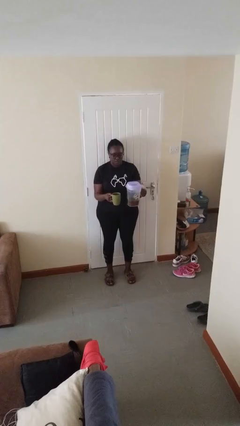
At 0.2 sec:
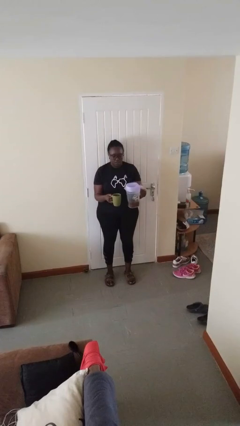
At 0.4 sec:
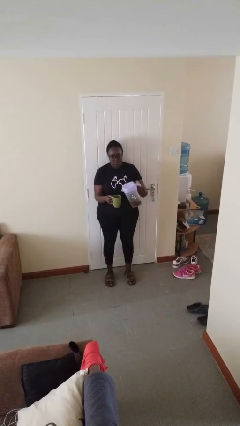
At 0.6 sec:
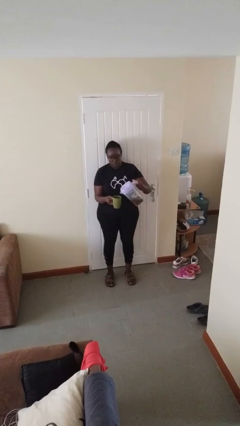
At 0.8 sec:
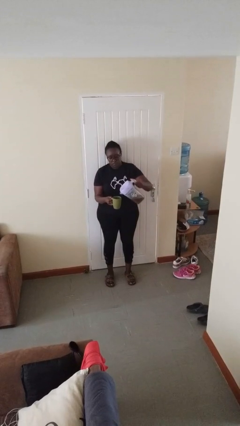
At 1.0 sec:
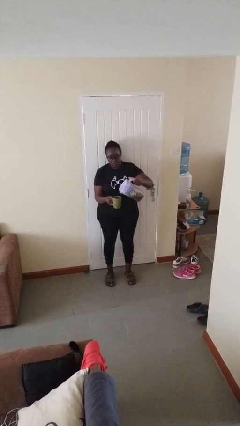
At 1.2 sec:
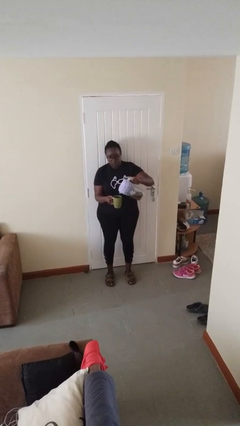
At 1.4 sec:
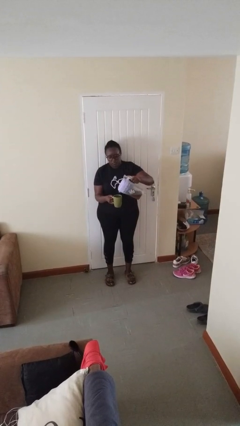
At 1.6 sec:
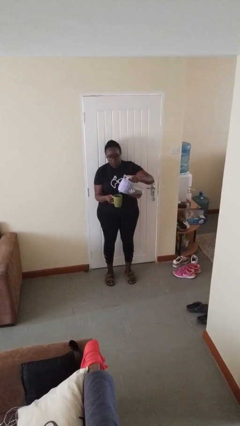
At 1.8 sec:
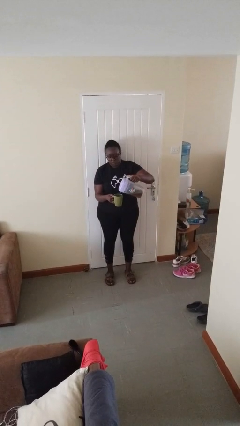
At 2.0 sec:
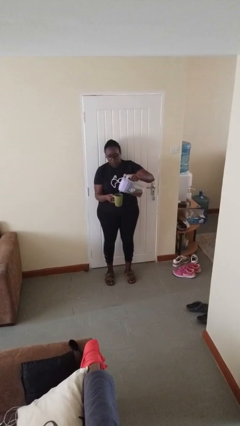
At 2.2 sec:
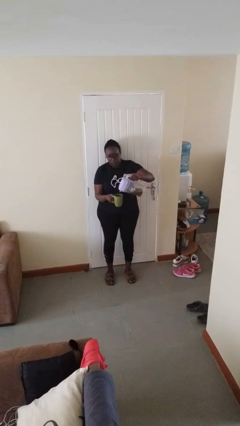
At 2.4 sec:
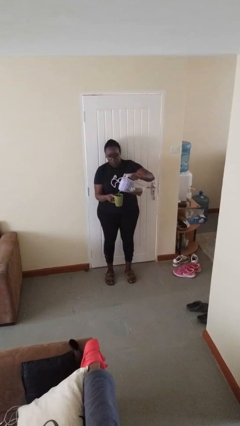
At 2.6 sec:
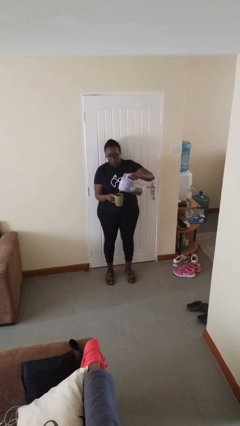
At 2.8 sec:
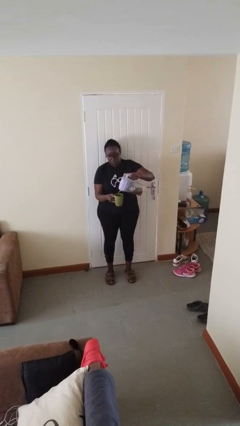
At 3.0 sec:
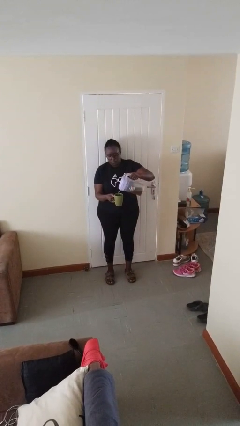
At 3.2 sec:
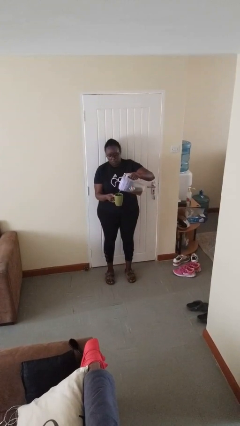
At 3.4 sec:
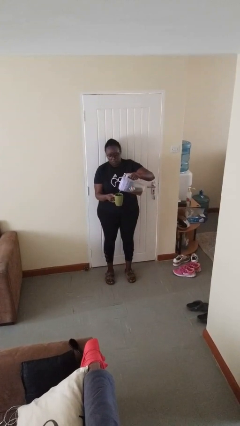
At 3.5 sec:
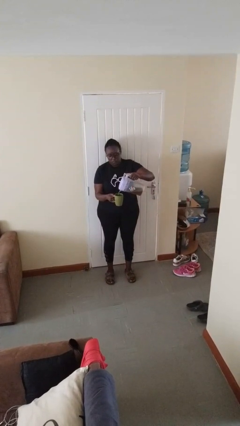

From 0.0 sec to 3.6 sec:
person pours coffee into mug

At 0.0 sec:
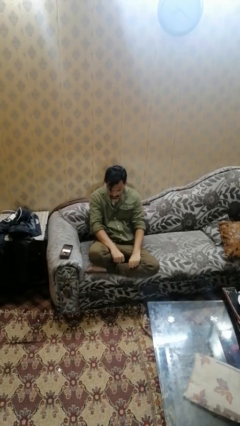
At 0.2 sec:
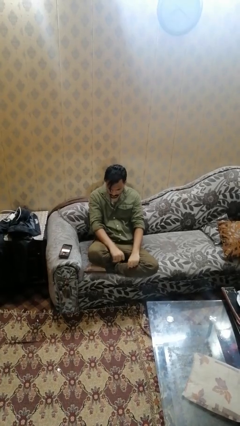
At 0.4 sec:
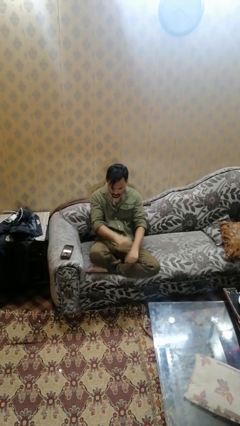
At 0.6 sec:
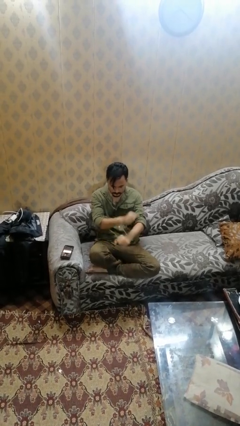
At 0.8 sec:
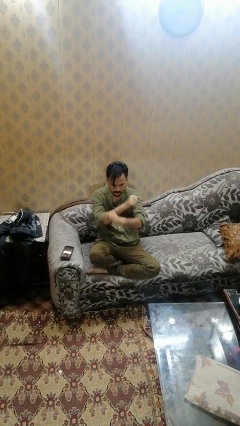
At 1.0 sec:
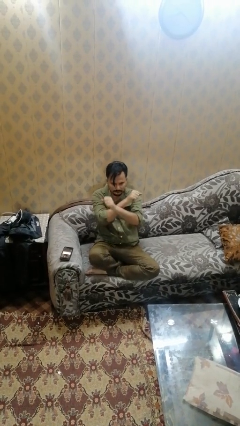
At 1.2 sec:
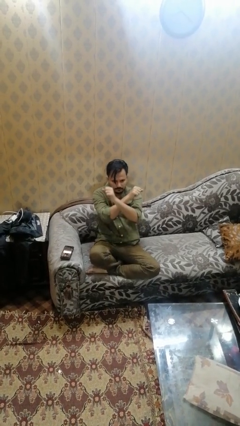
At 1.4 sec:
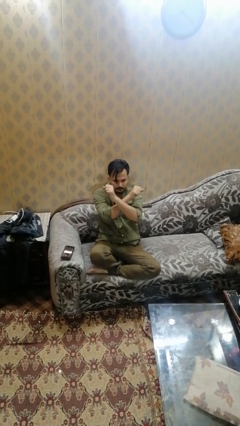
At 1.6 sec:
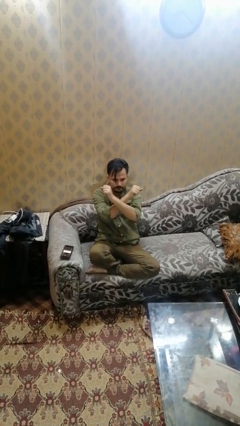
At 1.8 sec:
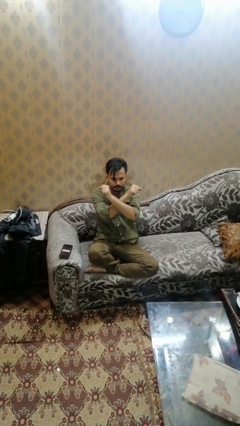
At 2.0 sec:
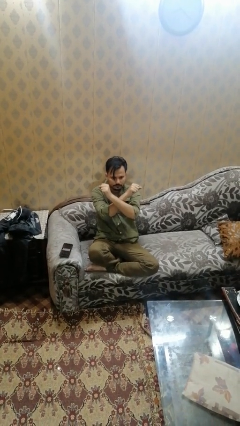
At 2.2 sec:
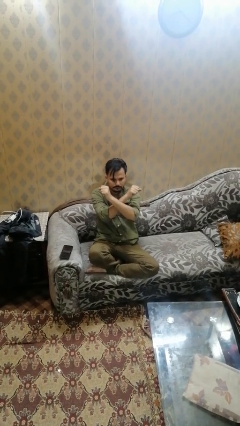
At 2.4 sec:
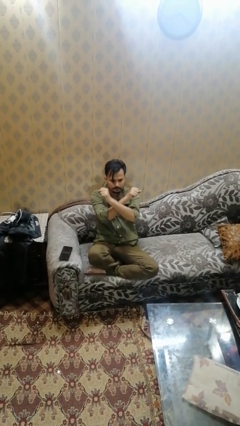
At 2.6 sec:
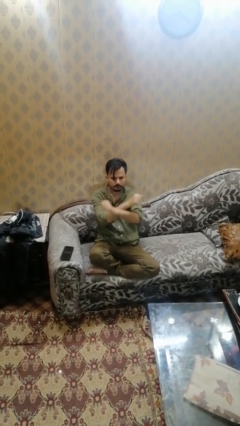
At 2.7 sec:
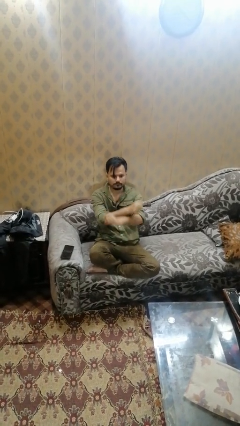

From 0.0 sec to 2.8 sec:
person gestures arms x

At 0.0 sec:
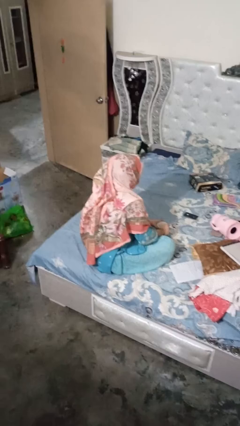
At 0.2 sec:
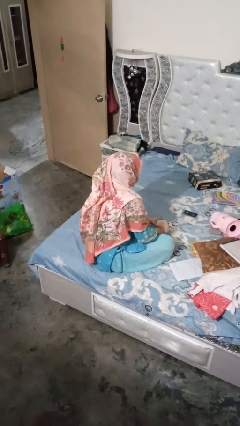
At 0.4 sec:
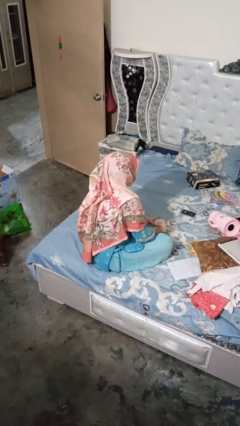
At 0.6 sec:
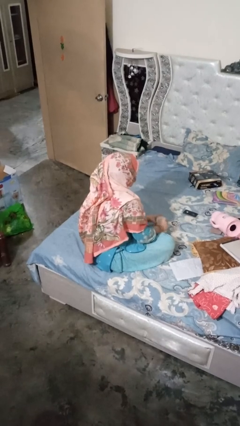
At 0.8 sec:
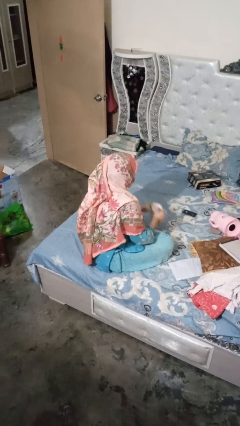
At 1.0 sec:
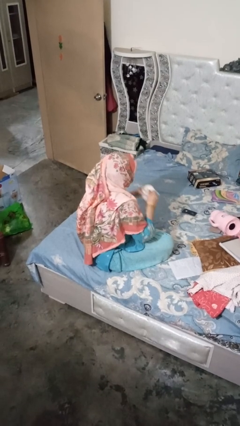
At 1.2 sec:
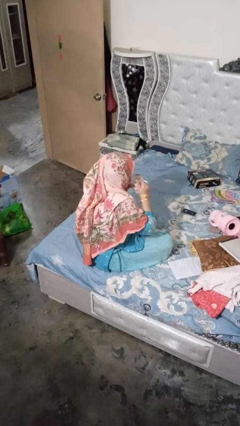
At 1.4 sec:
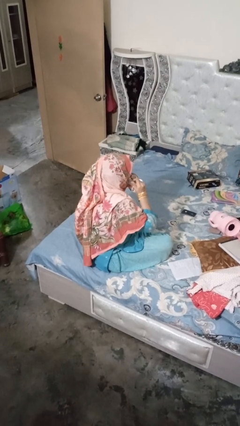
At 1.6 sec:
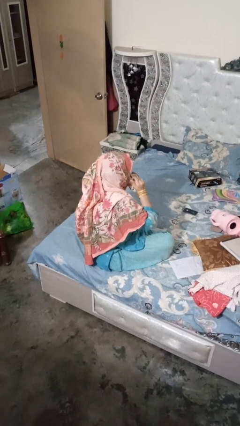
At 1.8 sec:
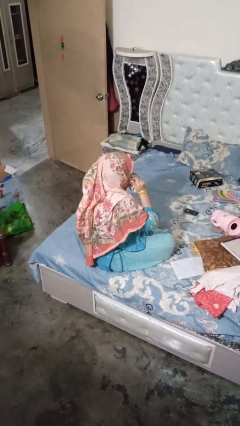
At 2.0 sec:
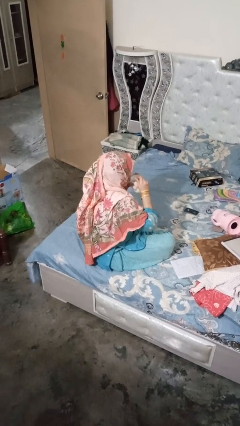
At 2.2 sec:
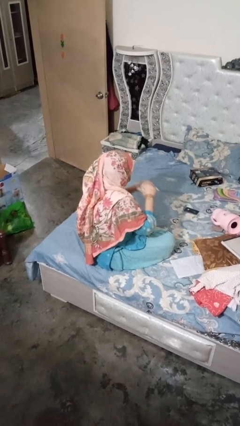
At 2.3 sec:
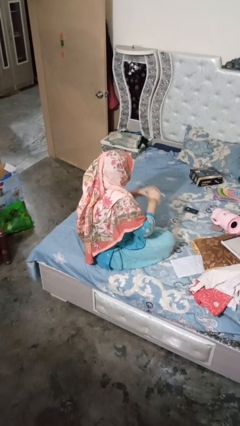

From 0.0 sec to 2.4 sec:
person drinks from mug

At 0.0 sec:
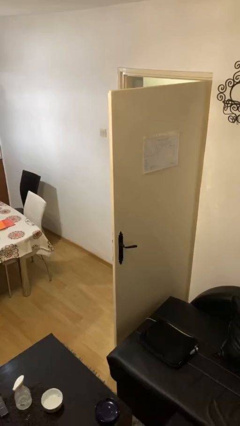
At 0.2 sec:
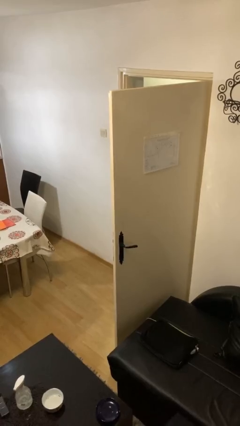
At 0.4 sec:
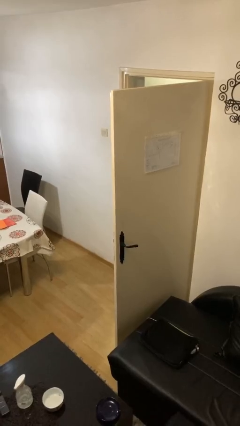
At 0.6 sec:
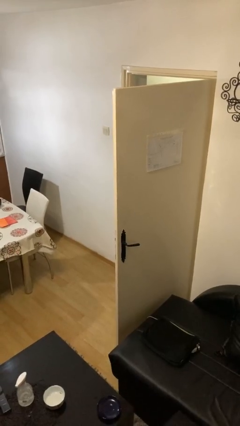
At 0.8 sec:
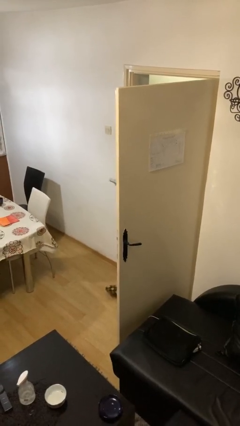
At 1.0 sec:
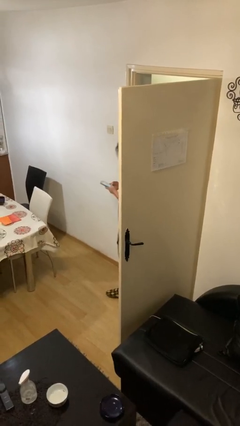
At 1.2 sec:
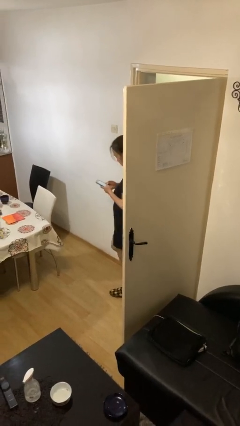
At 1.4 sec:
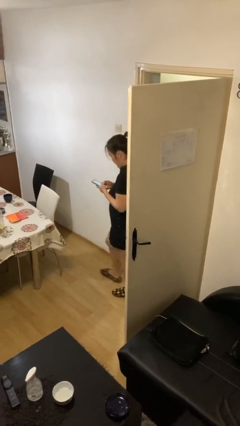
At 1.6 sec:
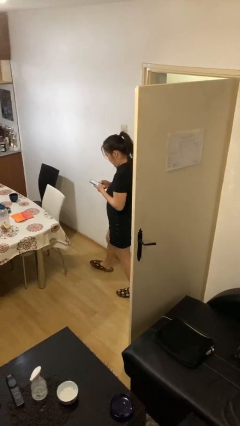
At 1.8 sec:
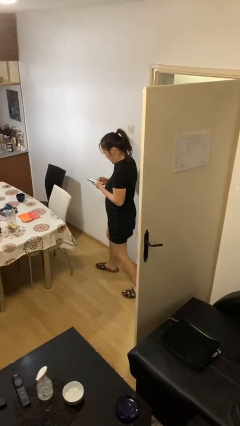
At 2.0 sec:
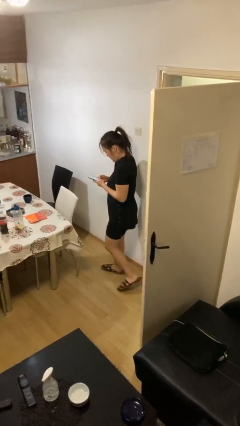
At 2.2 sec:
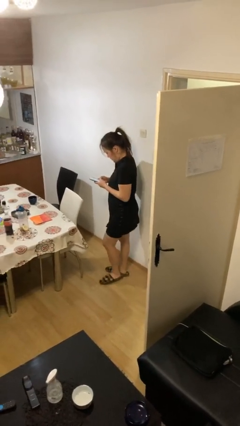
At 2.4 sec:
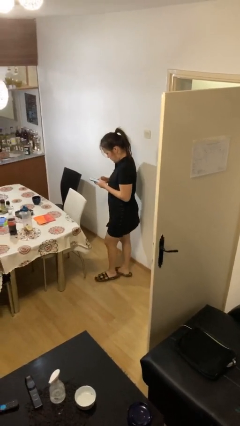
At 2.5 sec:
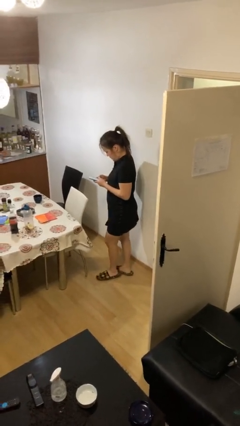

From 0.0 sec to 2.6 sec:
person enters scene through structure

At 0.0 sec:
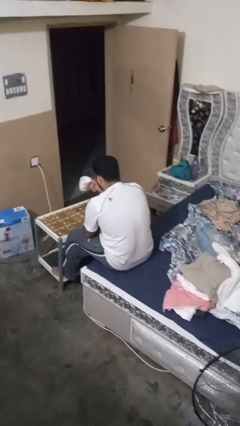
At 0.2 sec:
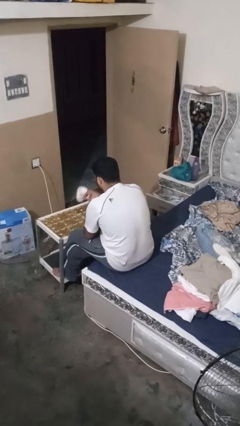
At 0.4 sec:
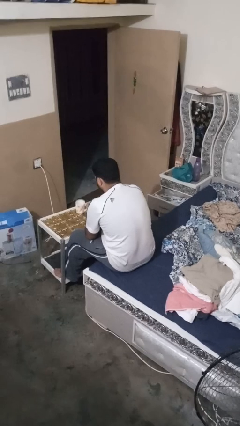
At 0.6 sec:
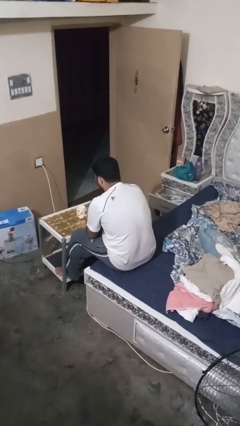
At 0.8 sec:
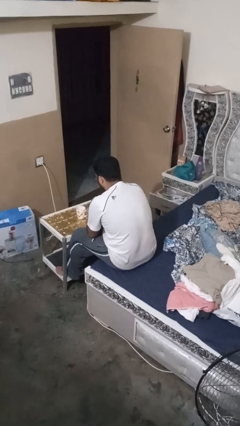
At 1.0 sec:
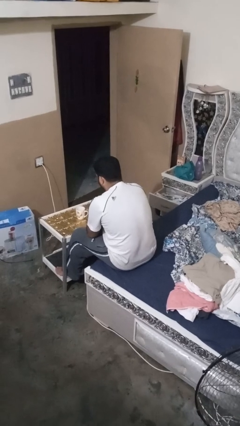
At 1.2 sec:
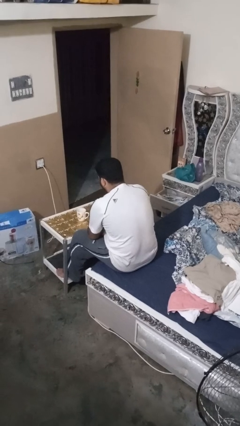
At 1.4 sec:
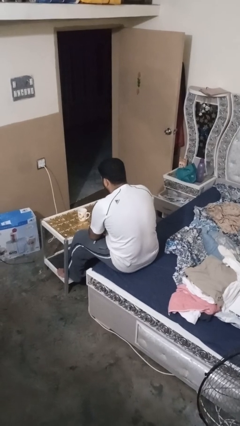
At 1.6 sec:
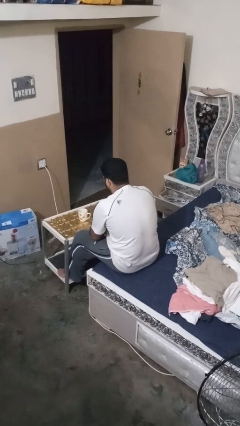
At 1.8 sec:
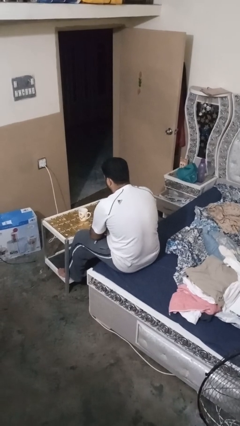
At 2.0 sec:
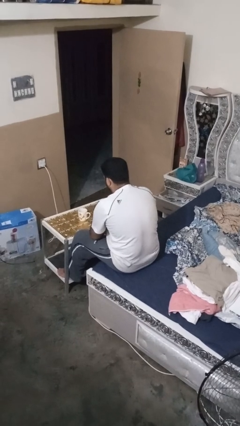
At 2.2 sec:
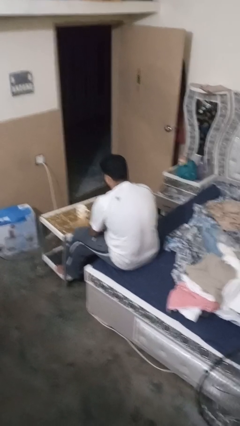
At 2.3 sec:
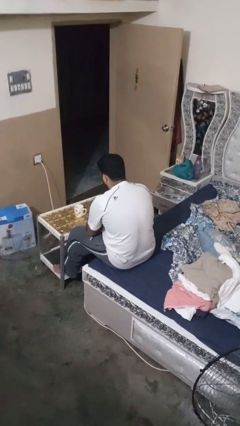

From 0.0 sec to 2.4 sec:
person puts down object on table

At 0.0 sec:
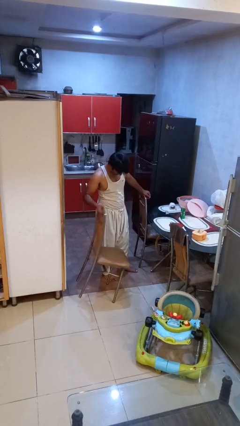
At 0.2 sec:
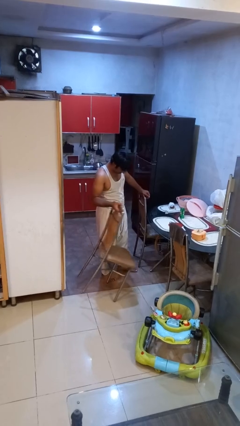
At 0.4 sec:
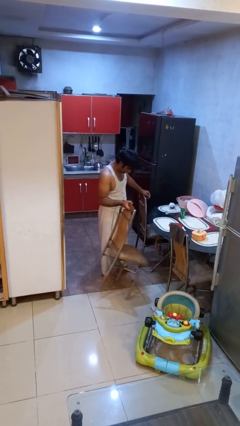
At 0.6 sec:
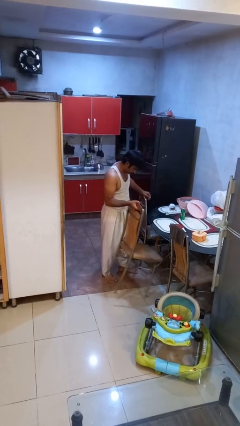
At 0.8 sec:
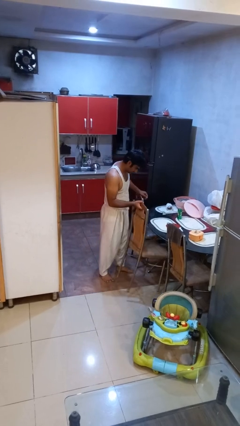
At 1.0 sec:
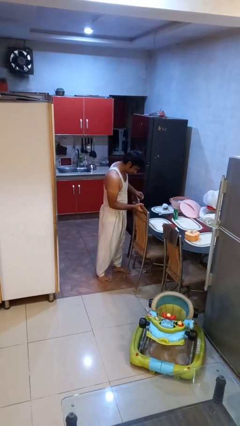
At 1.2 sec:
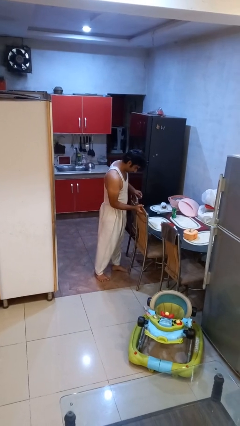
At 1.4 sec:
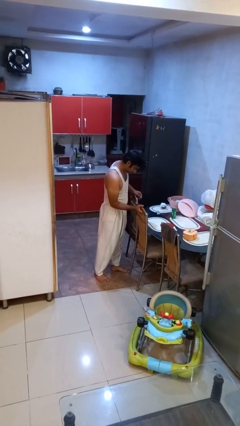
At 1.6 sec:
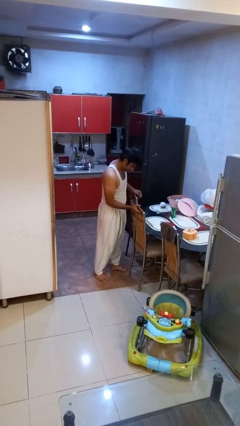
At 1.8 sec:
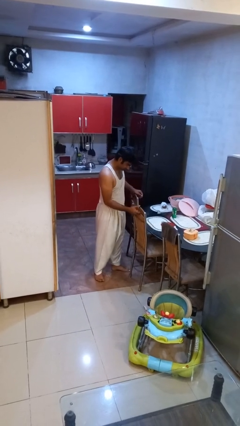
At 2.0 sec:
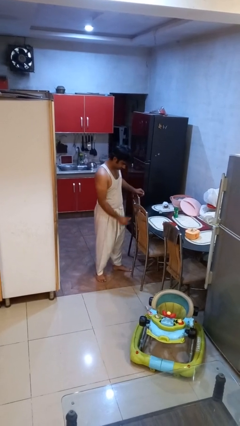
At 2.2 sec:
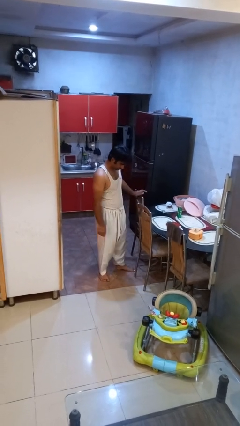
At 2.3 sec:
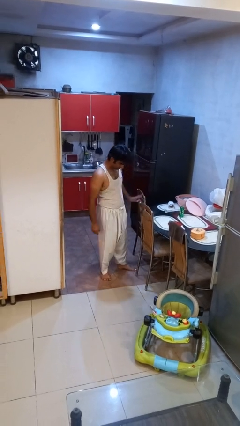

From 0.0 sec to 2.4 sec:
person pushes in chair
